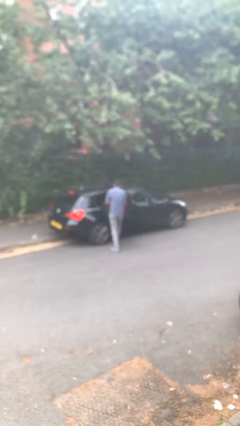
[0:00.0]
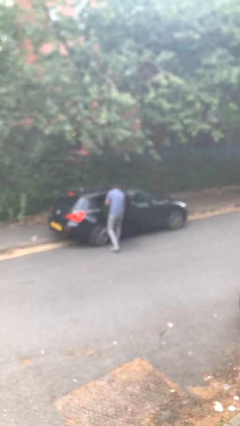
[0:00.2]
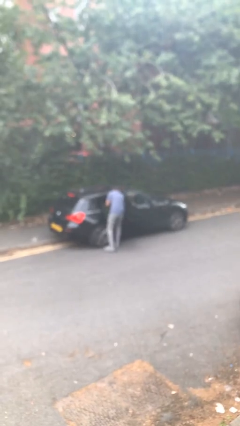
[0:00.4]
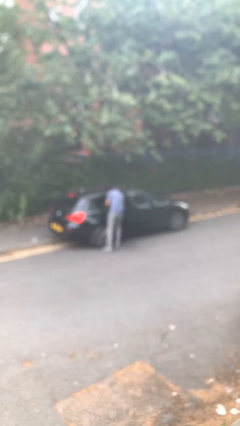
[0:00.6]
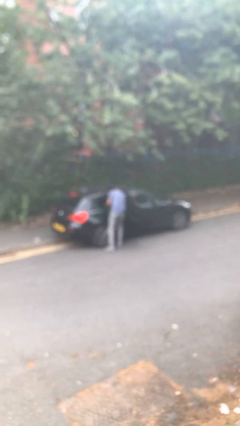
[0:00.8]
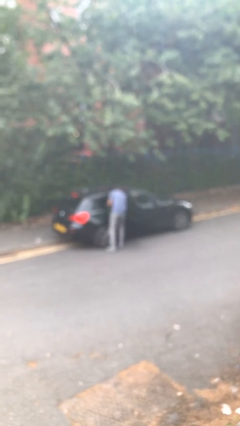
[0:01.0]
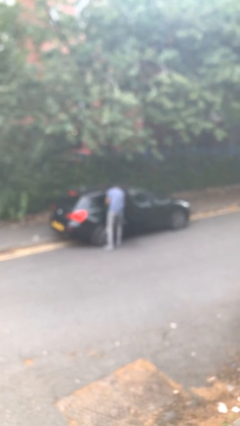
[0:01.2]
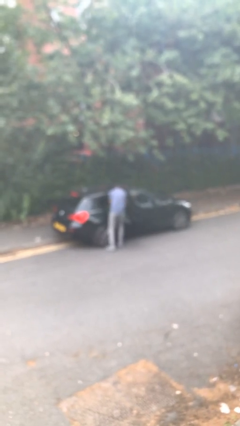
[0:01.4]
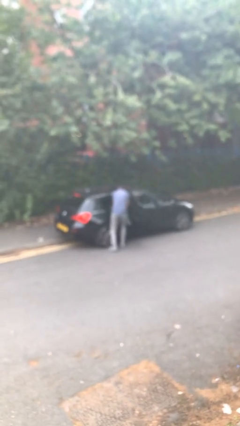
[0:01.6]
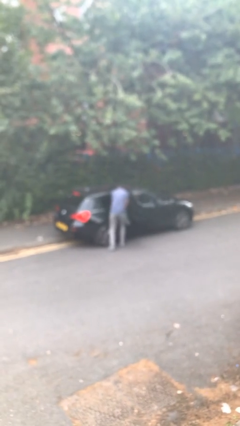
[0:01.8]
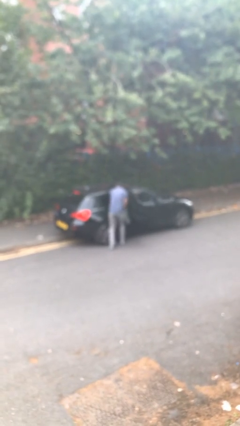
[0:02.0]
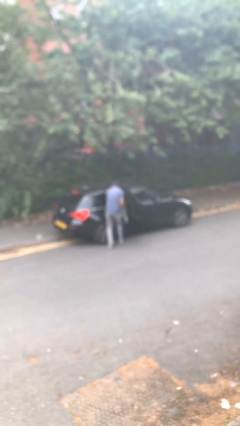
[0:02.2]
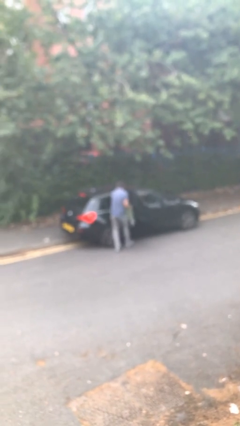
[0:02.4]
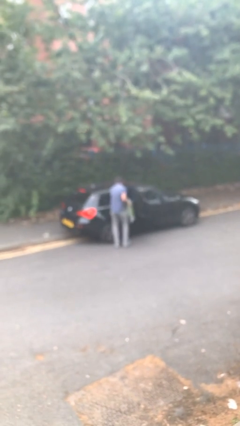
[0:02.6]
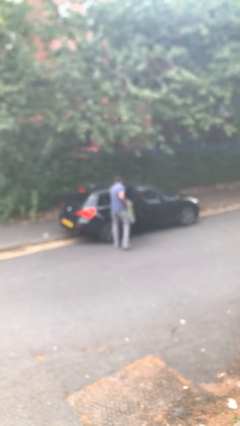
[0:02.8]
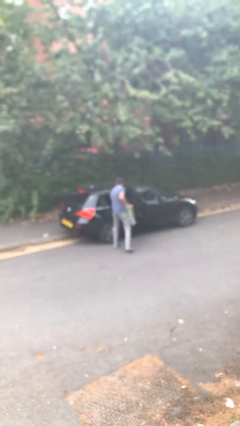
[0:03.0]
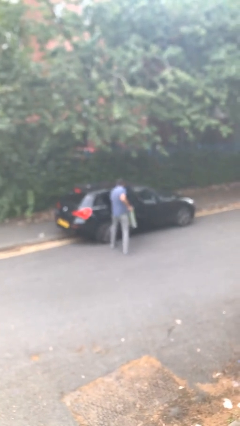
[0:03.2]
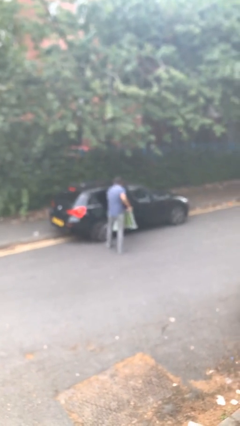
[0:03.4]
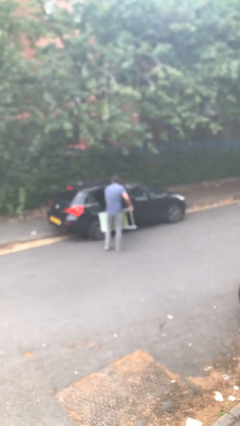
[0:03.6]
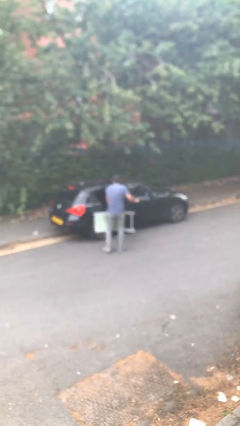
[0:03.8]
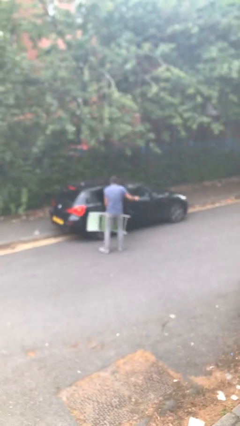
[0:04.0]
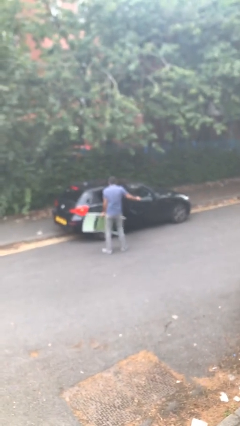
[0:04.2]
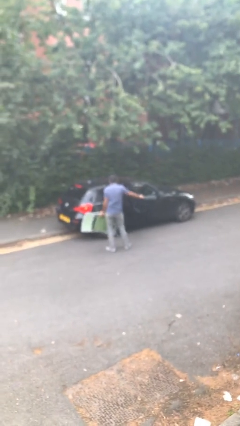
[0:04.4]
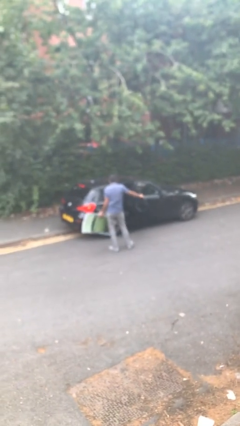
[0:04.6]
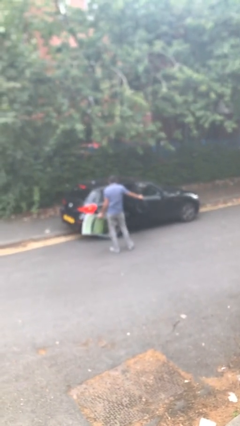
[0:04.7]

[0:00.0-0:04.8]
person unloads car

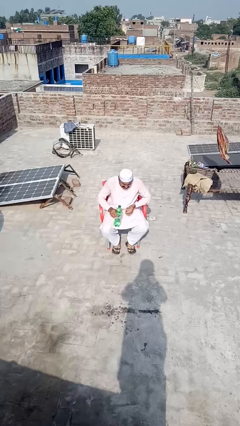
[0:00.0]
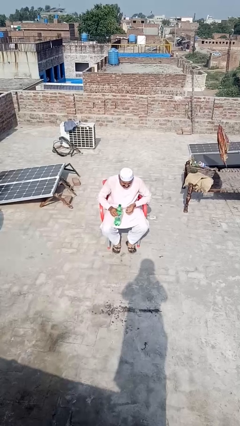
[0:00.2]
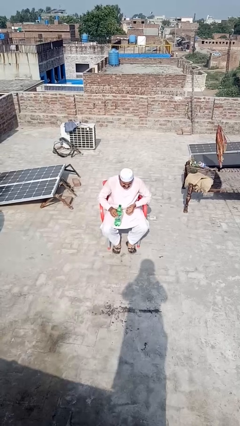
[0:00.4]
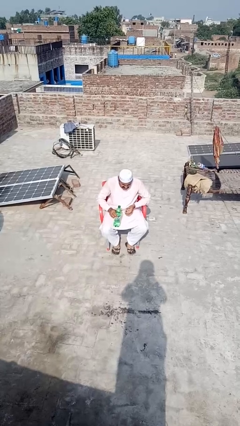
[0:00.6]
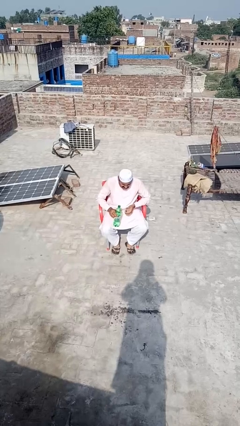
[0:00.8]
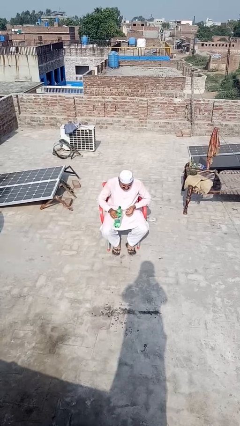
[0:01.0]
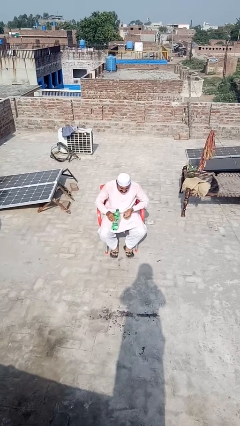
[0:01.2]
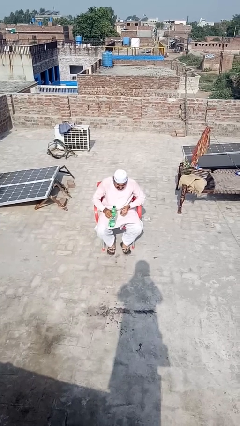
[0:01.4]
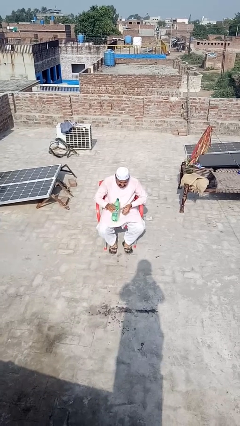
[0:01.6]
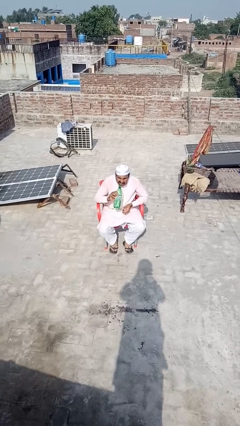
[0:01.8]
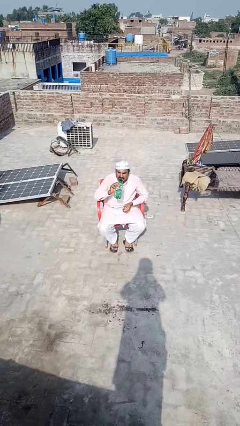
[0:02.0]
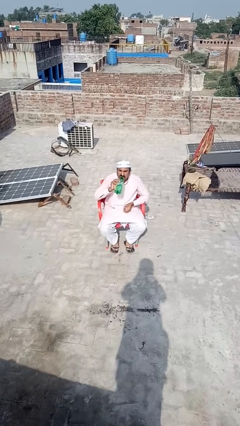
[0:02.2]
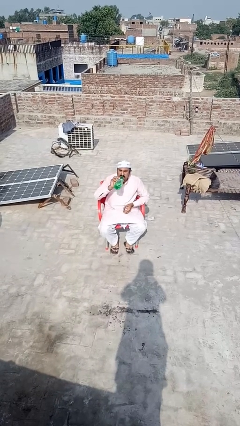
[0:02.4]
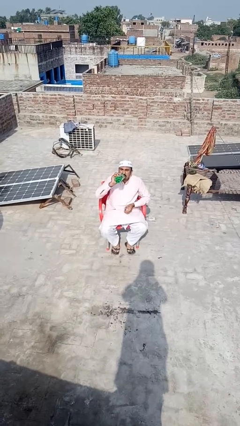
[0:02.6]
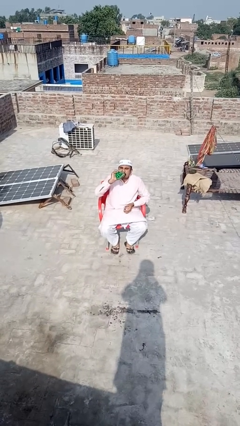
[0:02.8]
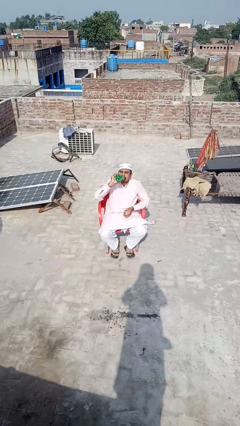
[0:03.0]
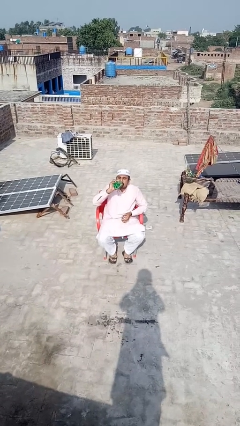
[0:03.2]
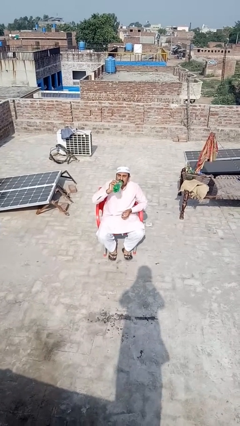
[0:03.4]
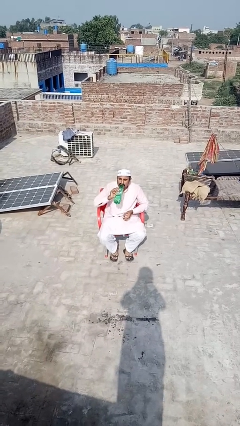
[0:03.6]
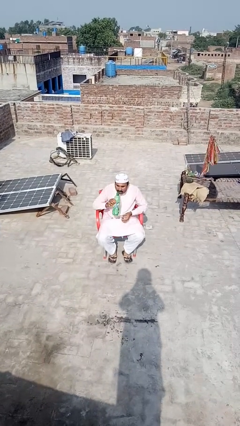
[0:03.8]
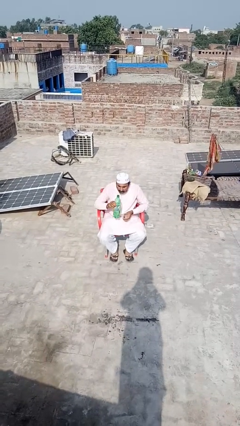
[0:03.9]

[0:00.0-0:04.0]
person drinks from bottle

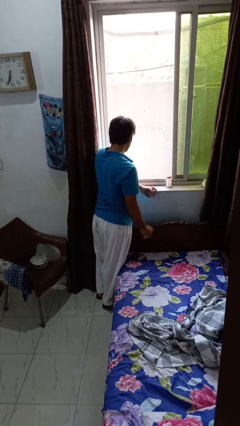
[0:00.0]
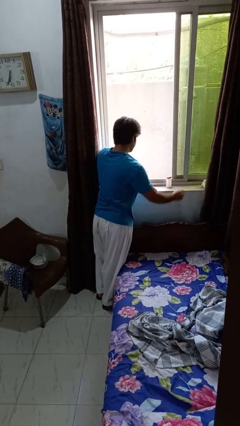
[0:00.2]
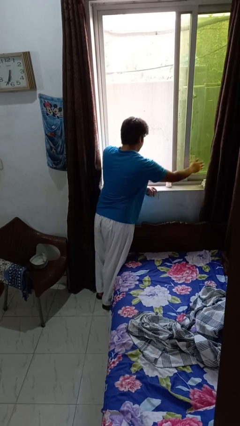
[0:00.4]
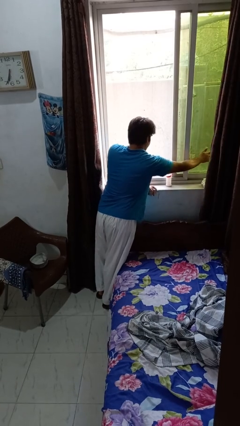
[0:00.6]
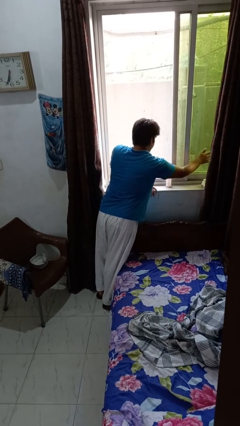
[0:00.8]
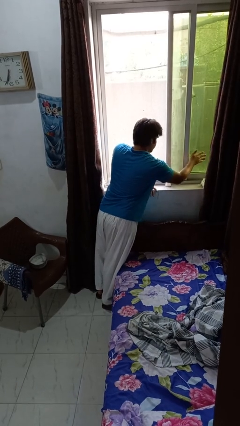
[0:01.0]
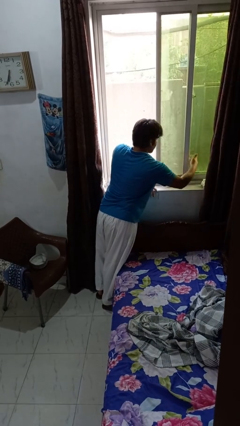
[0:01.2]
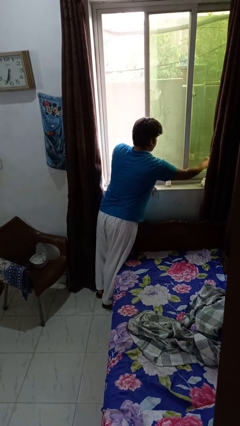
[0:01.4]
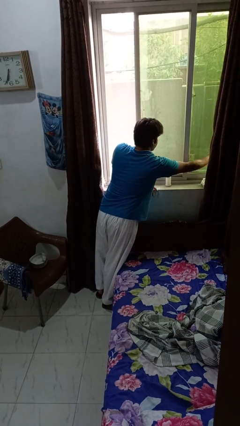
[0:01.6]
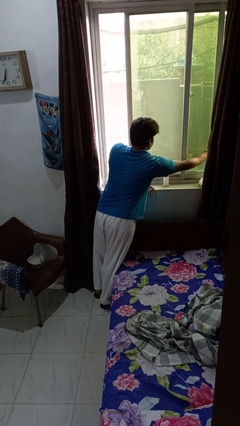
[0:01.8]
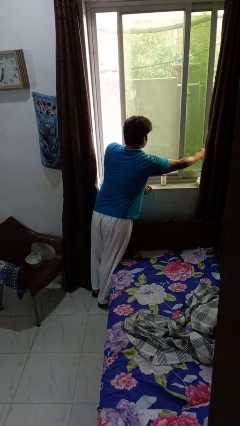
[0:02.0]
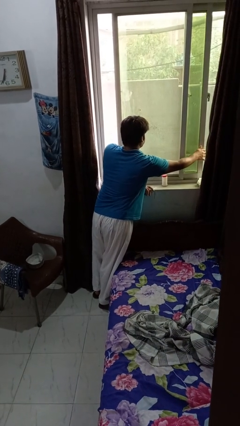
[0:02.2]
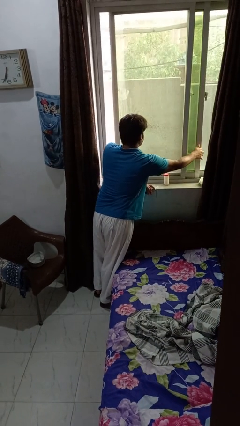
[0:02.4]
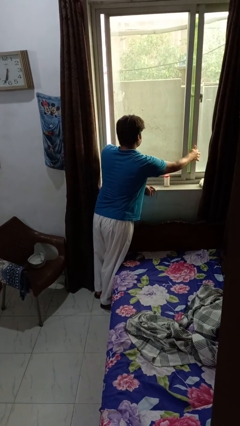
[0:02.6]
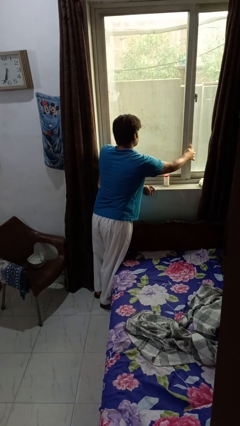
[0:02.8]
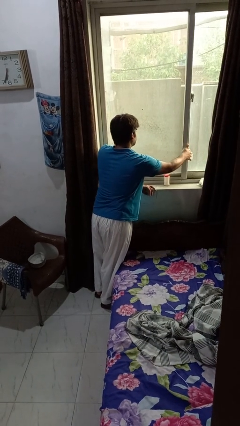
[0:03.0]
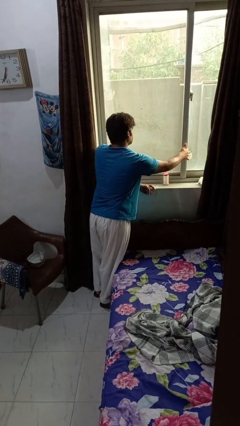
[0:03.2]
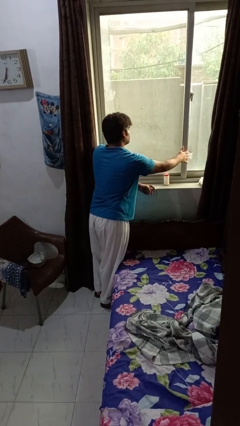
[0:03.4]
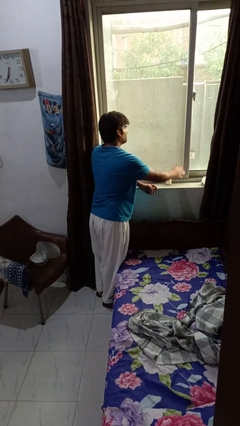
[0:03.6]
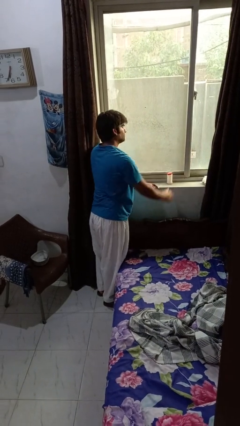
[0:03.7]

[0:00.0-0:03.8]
person closes home window

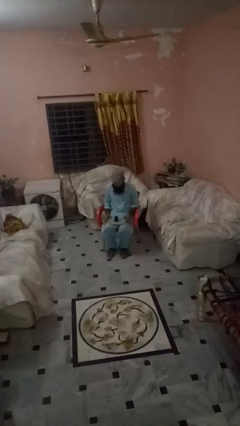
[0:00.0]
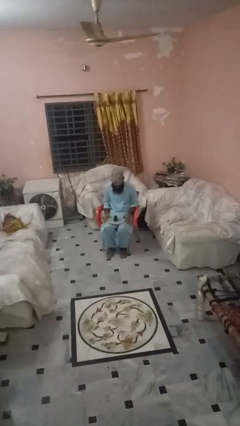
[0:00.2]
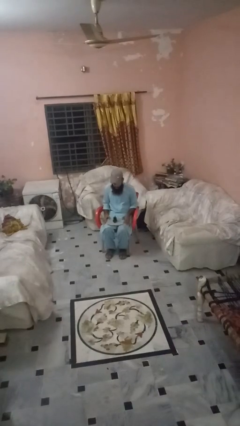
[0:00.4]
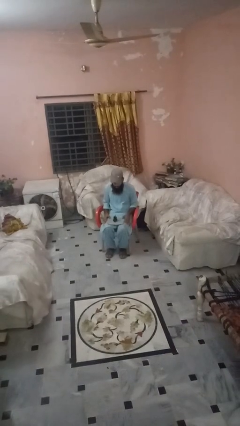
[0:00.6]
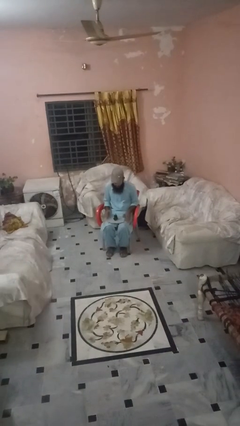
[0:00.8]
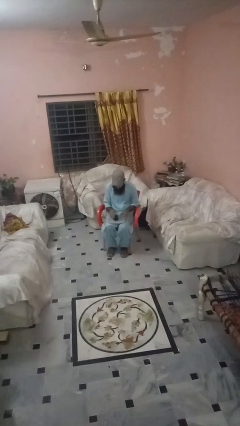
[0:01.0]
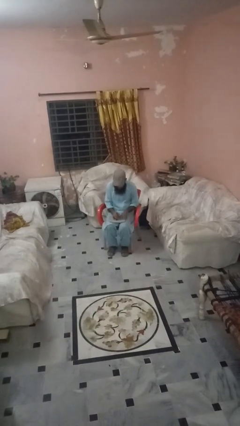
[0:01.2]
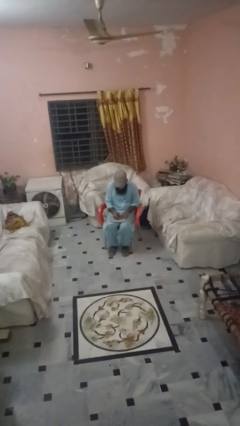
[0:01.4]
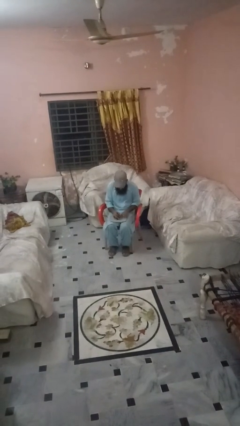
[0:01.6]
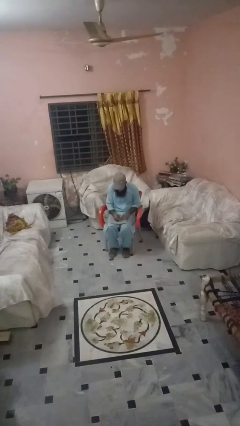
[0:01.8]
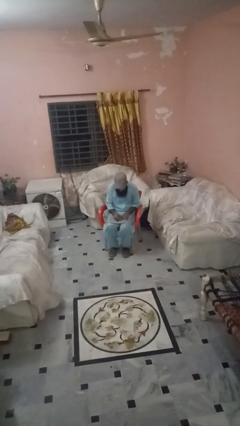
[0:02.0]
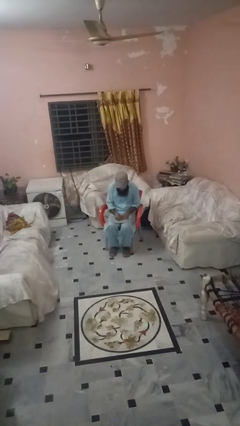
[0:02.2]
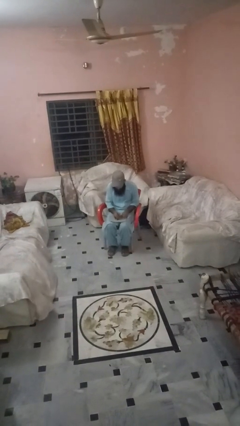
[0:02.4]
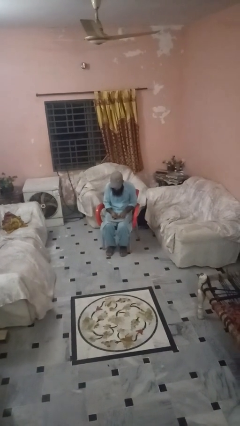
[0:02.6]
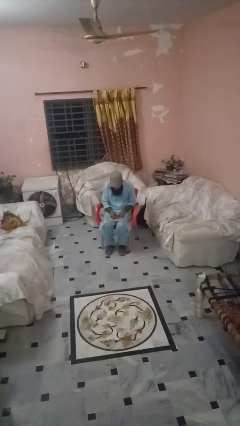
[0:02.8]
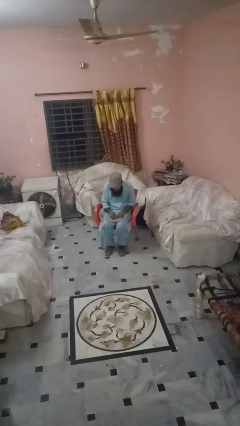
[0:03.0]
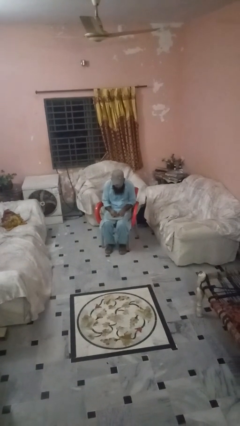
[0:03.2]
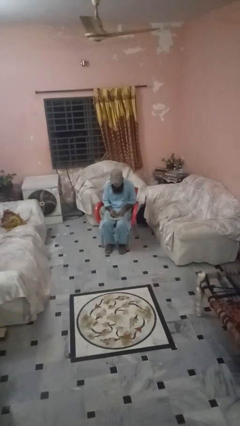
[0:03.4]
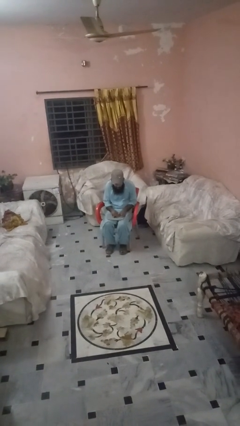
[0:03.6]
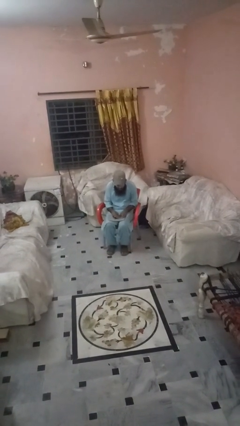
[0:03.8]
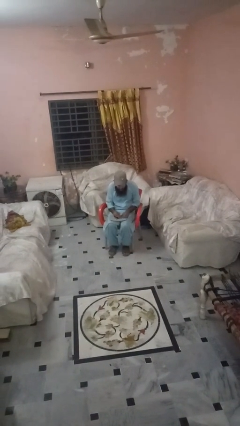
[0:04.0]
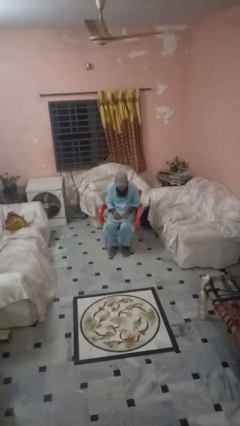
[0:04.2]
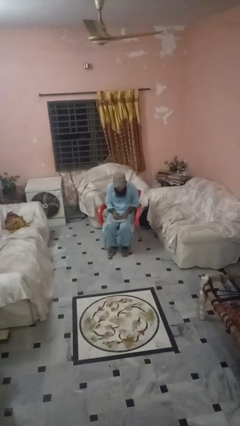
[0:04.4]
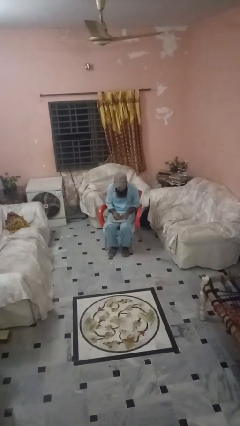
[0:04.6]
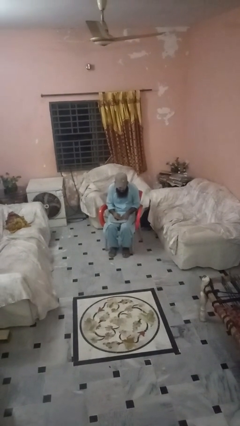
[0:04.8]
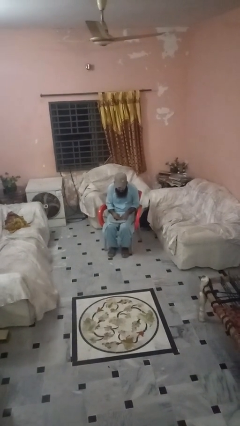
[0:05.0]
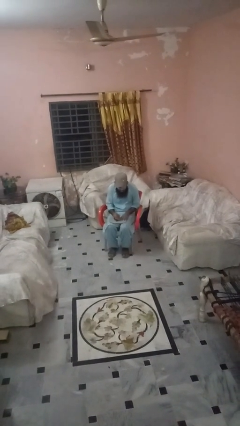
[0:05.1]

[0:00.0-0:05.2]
person interacts with handheld game
